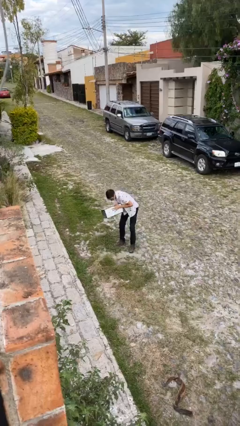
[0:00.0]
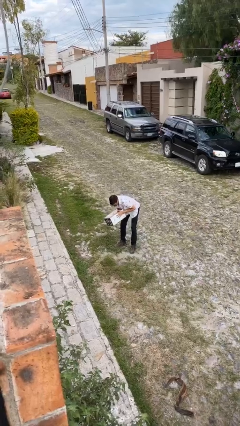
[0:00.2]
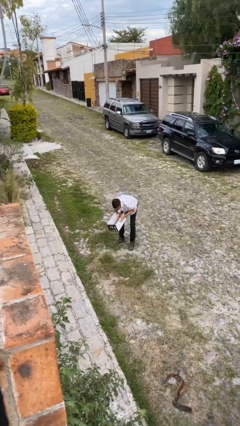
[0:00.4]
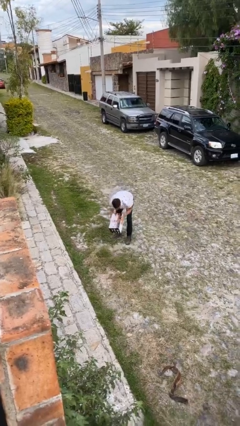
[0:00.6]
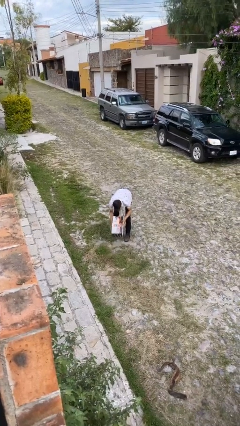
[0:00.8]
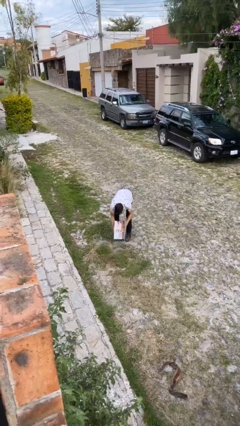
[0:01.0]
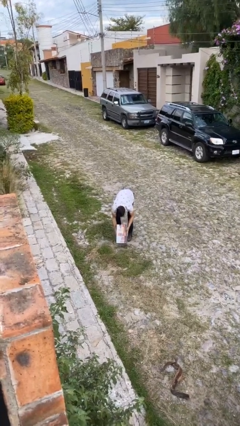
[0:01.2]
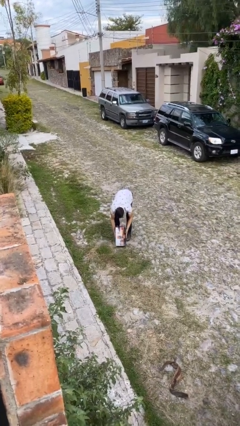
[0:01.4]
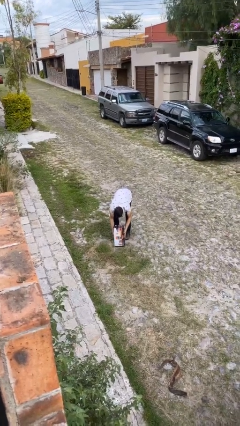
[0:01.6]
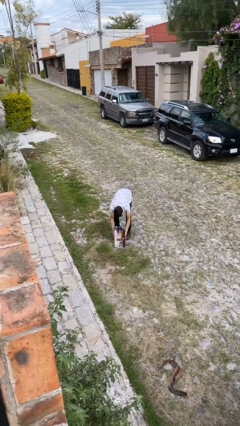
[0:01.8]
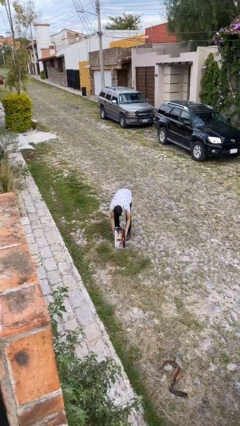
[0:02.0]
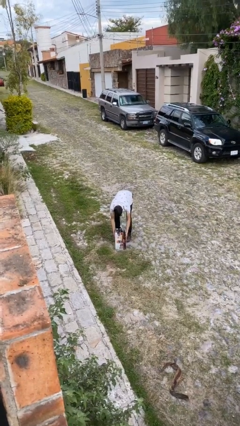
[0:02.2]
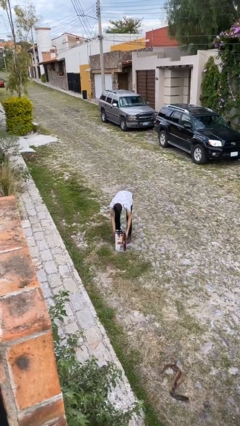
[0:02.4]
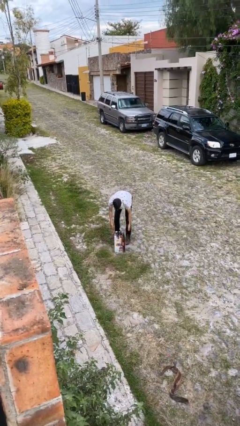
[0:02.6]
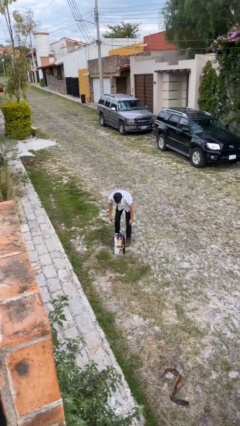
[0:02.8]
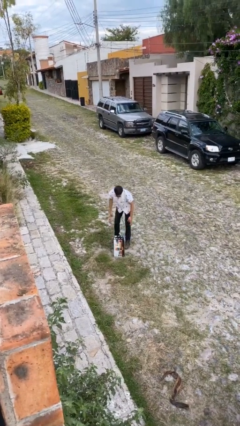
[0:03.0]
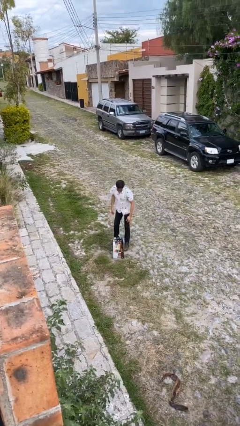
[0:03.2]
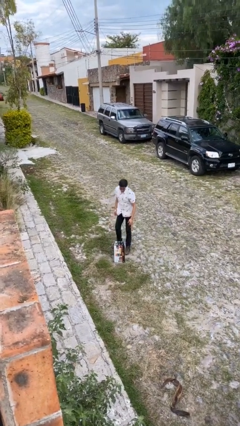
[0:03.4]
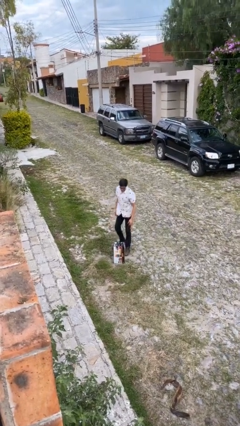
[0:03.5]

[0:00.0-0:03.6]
person puts down object on floor

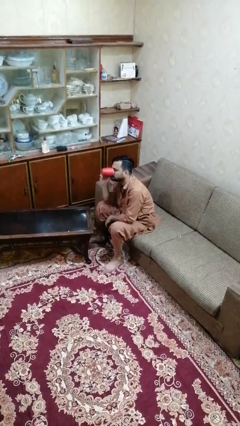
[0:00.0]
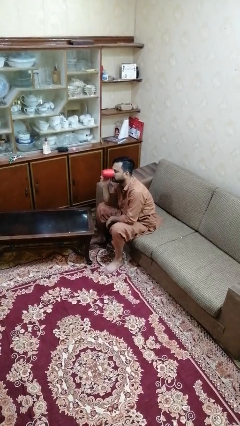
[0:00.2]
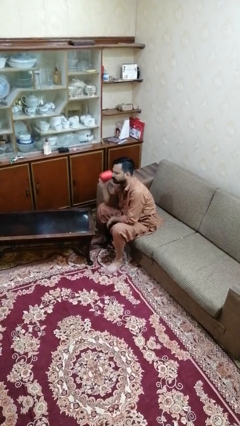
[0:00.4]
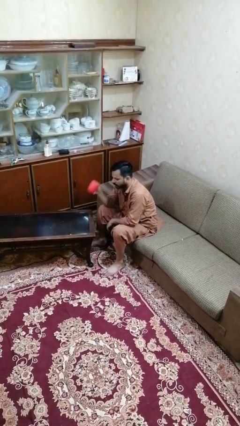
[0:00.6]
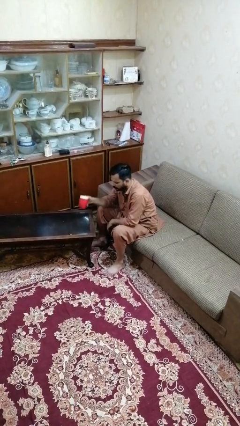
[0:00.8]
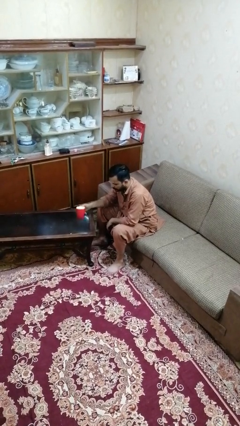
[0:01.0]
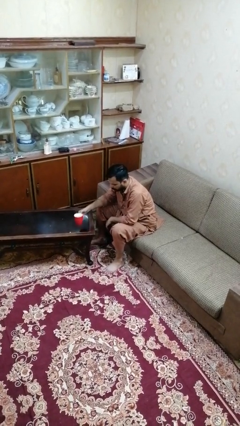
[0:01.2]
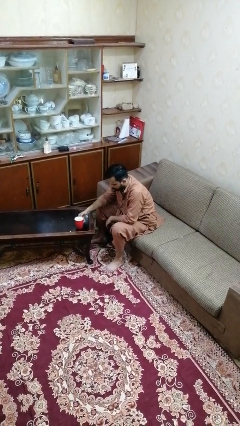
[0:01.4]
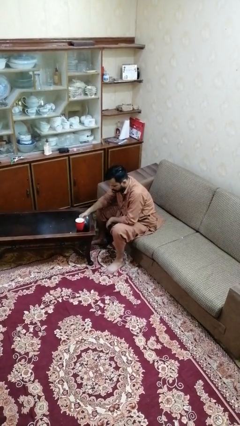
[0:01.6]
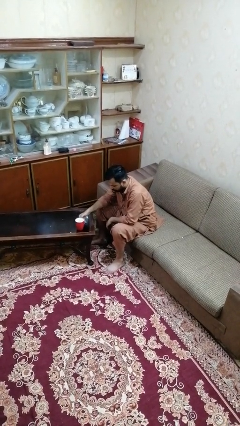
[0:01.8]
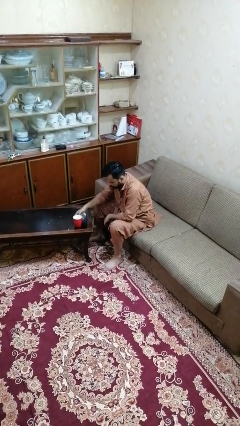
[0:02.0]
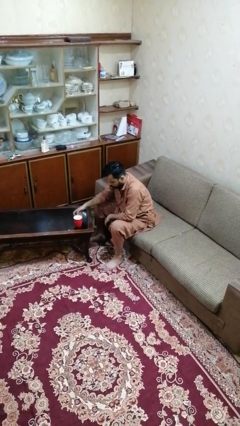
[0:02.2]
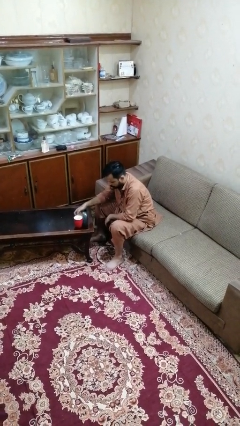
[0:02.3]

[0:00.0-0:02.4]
person puts down object on table

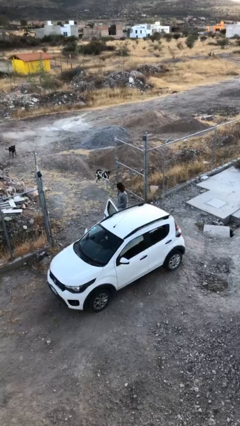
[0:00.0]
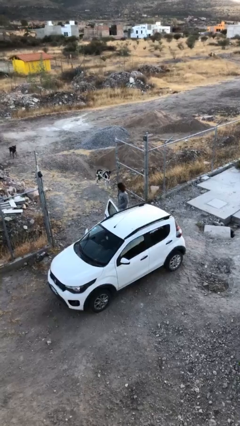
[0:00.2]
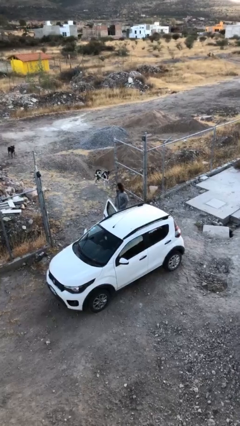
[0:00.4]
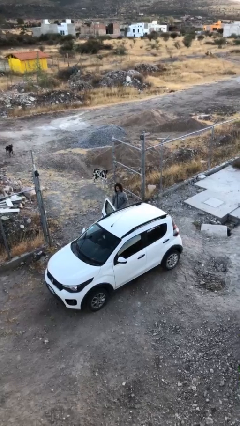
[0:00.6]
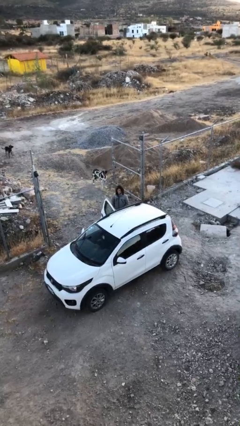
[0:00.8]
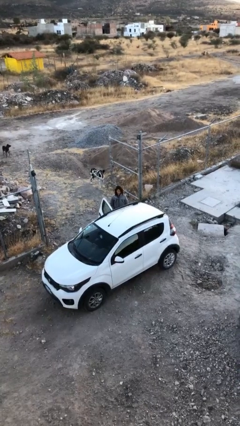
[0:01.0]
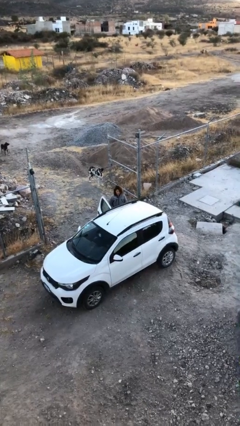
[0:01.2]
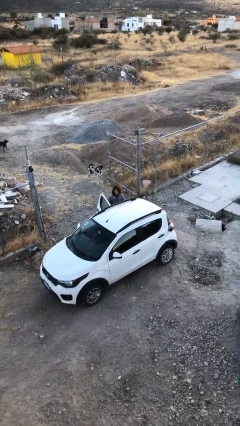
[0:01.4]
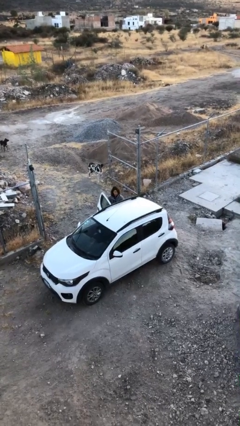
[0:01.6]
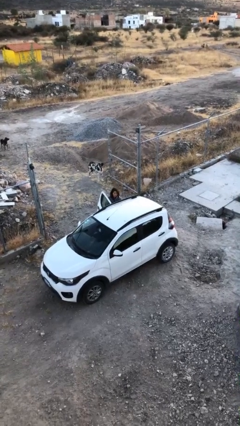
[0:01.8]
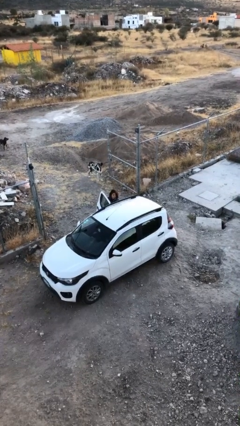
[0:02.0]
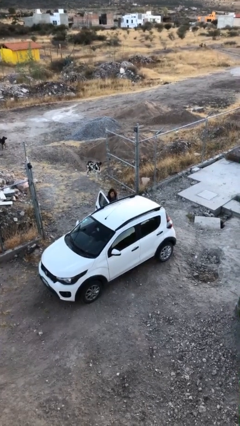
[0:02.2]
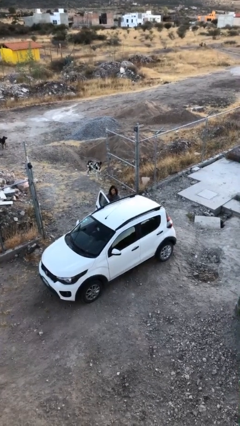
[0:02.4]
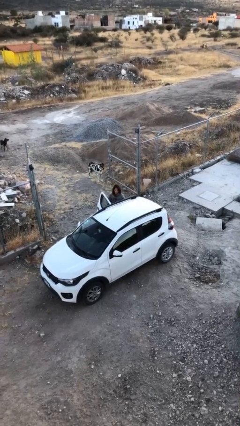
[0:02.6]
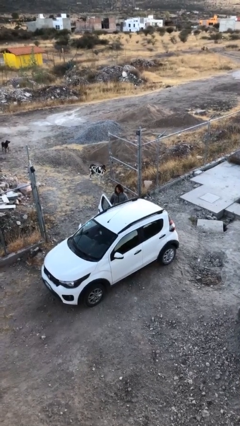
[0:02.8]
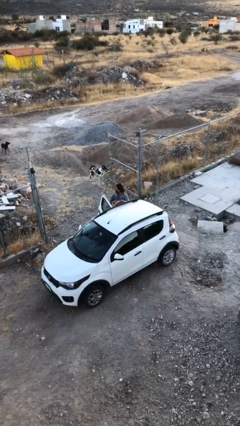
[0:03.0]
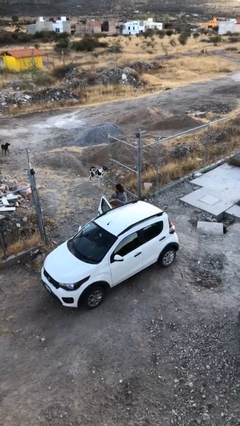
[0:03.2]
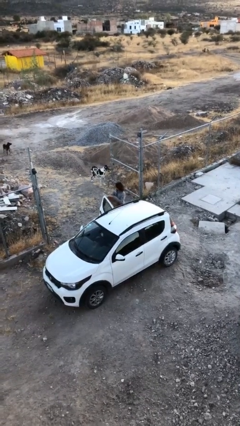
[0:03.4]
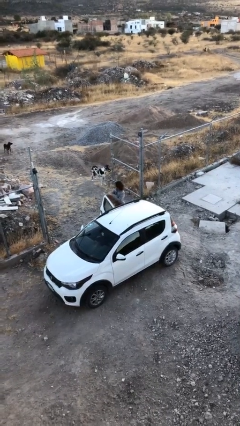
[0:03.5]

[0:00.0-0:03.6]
person unloads car

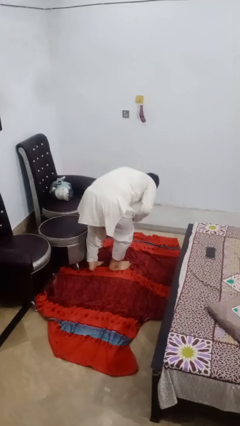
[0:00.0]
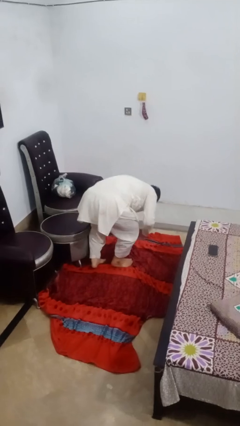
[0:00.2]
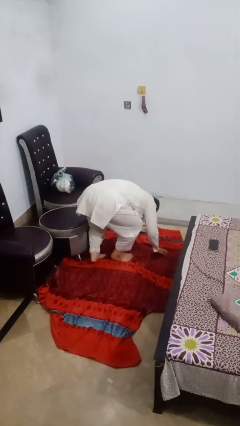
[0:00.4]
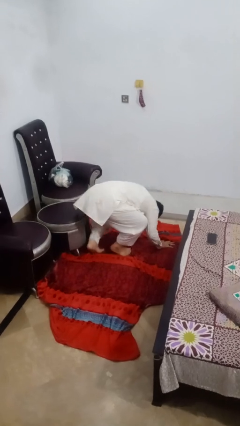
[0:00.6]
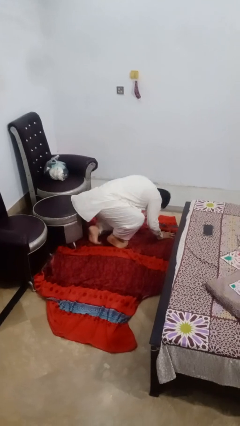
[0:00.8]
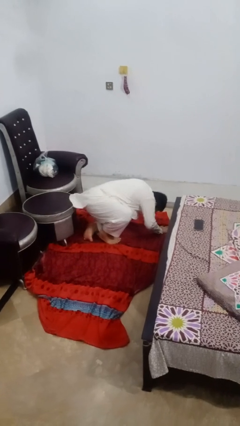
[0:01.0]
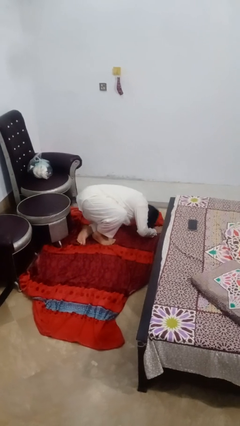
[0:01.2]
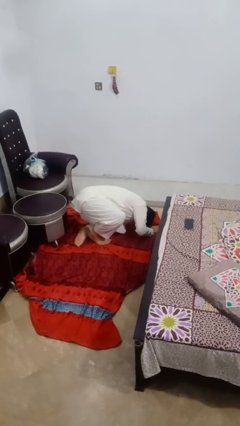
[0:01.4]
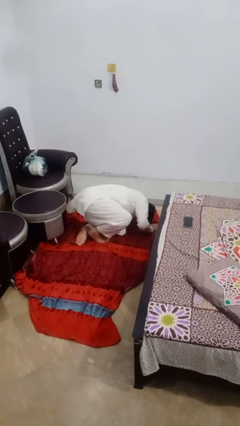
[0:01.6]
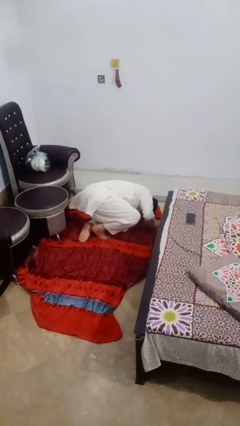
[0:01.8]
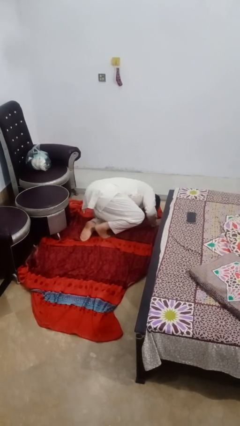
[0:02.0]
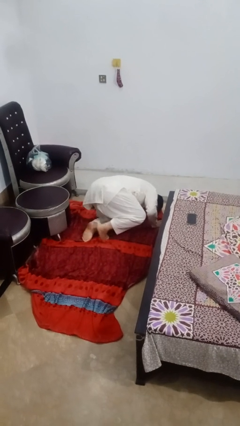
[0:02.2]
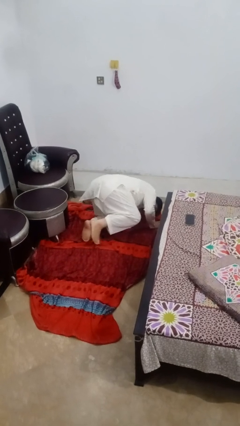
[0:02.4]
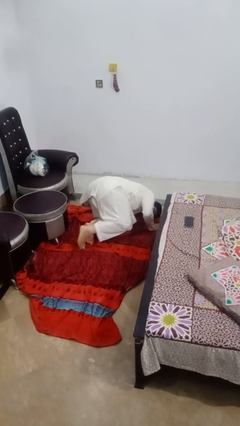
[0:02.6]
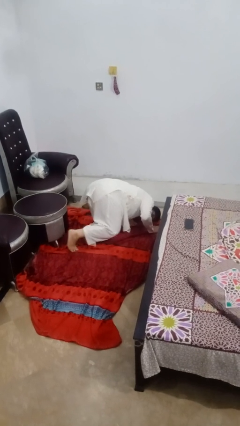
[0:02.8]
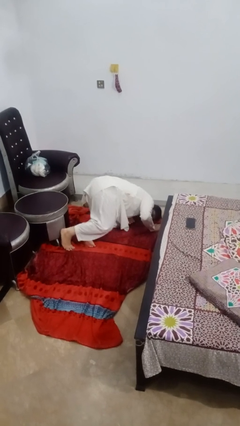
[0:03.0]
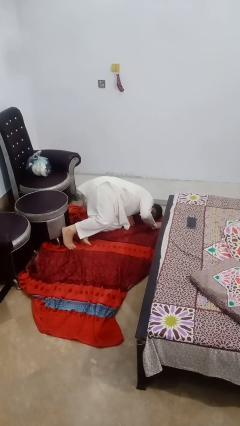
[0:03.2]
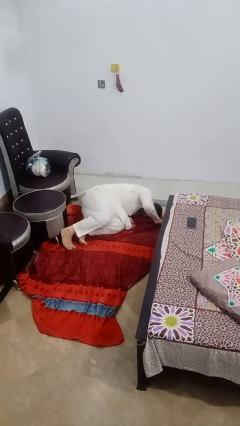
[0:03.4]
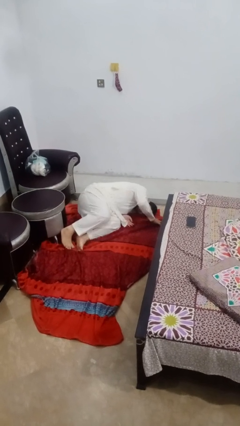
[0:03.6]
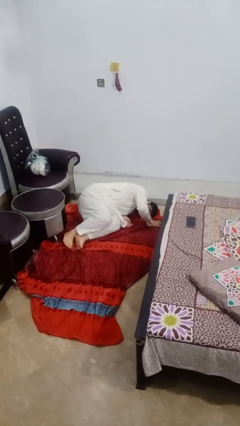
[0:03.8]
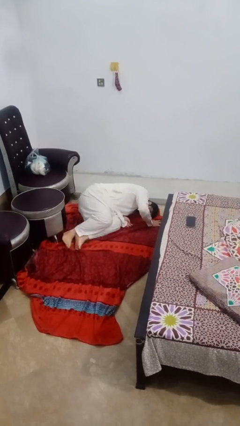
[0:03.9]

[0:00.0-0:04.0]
person lies down on floor

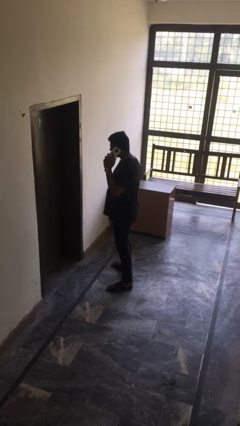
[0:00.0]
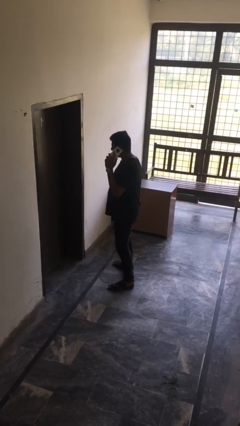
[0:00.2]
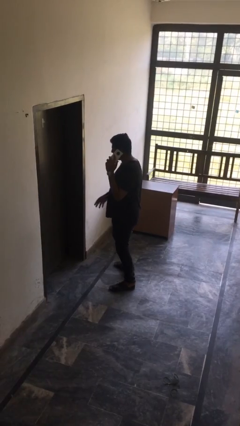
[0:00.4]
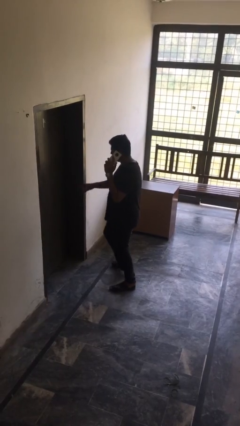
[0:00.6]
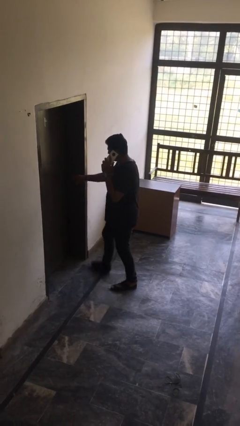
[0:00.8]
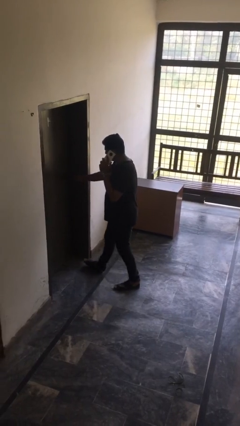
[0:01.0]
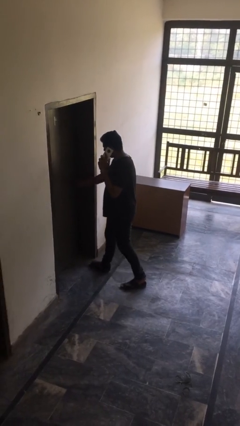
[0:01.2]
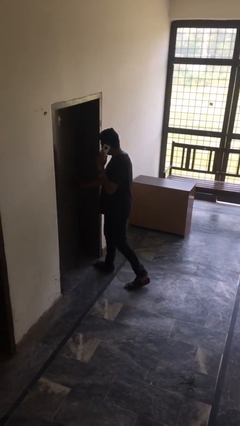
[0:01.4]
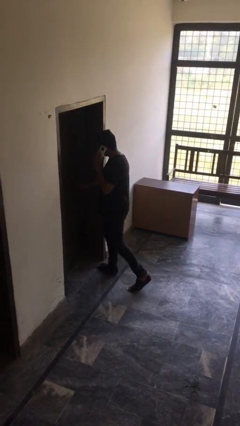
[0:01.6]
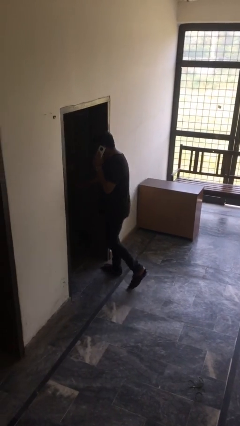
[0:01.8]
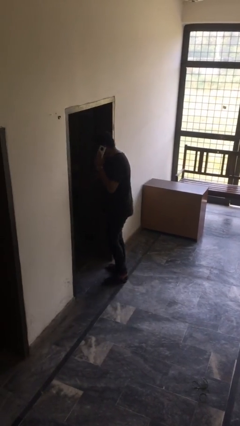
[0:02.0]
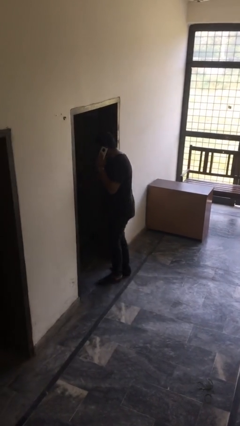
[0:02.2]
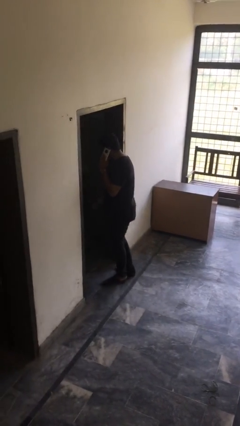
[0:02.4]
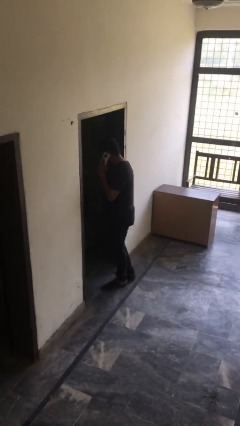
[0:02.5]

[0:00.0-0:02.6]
person opens facility door

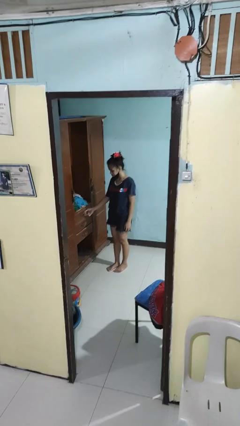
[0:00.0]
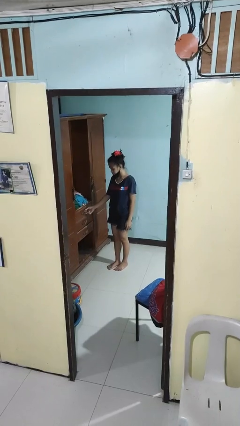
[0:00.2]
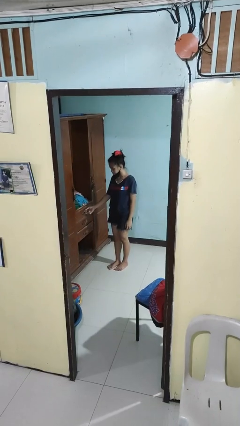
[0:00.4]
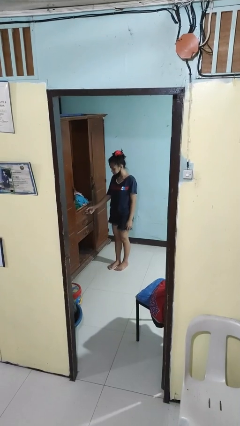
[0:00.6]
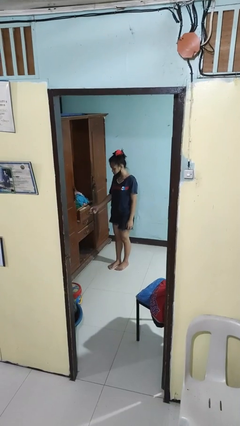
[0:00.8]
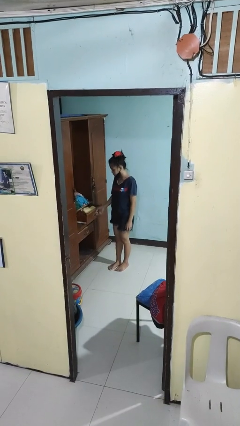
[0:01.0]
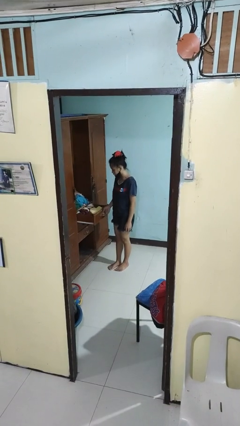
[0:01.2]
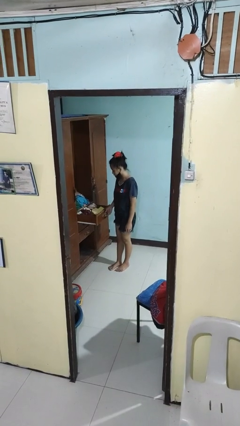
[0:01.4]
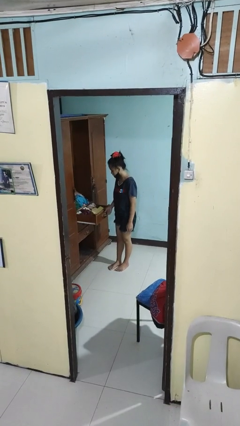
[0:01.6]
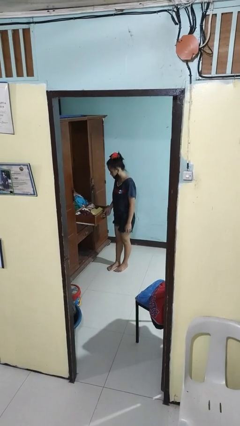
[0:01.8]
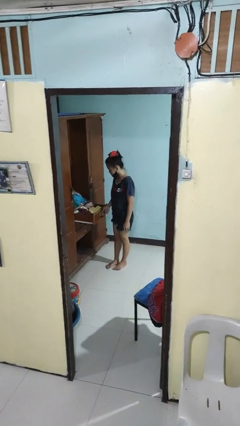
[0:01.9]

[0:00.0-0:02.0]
person opens dresser drawer
